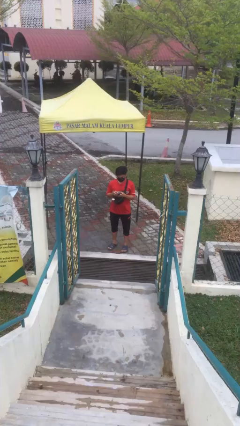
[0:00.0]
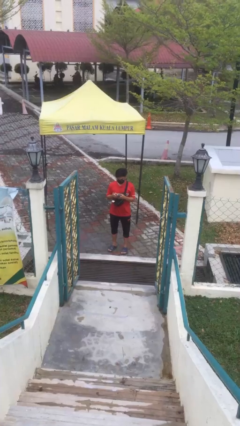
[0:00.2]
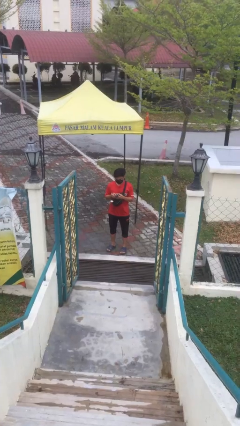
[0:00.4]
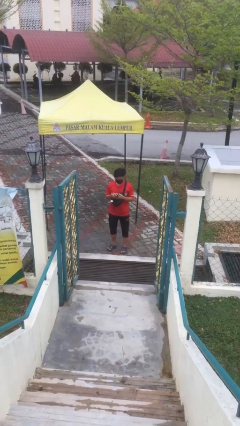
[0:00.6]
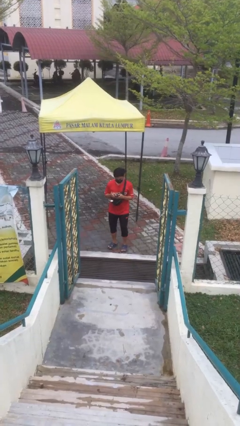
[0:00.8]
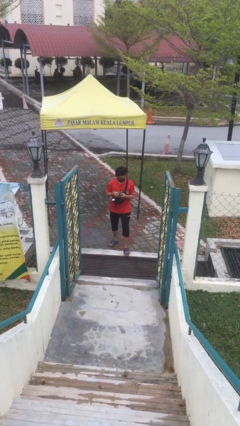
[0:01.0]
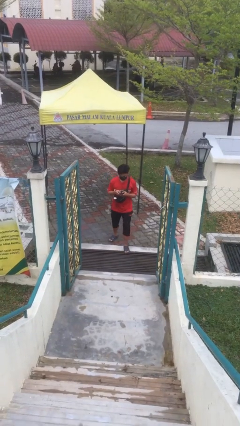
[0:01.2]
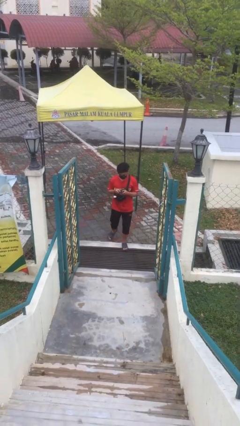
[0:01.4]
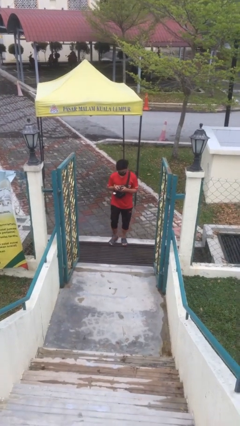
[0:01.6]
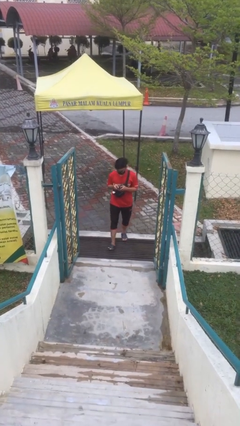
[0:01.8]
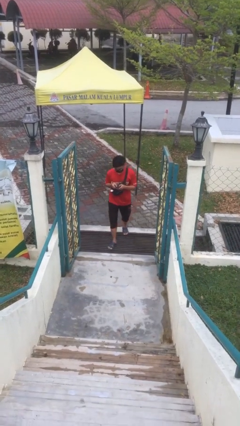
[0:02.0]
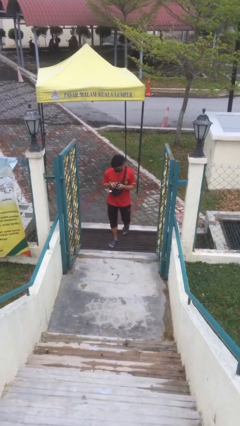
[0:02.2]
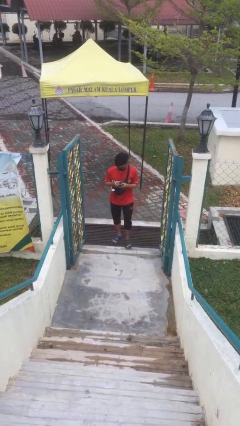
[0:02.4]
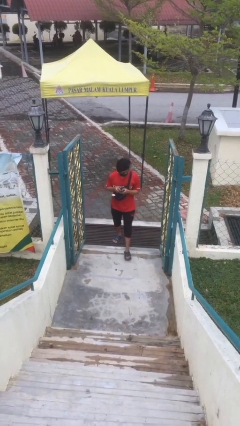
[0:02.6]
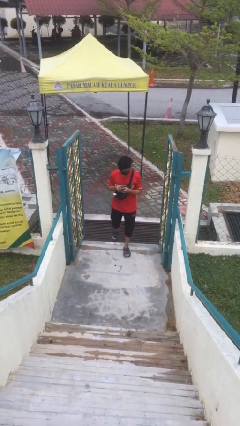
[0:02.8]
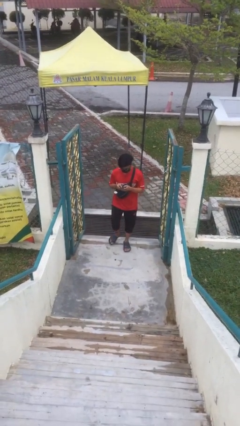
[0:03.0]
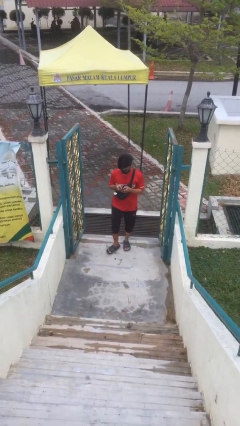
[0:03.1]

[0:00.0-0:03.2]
person enters scene through structure

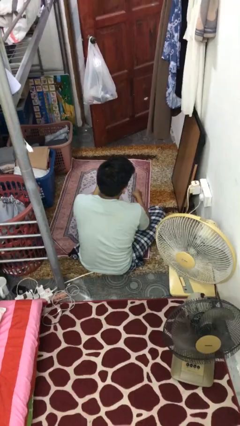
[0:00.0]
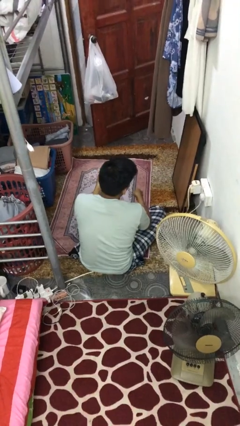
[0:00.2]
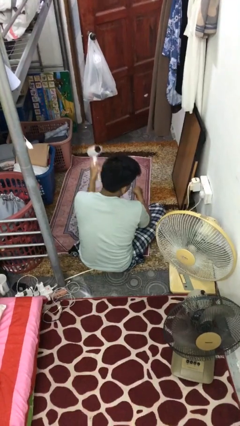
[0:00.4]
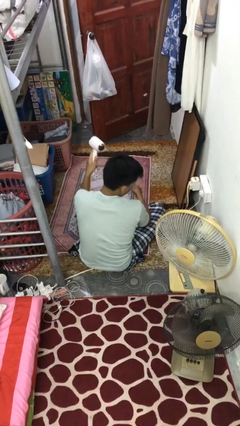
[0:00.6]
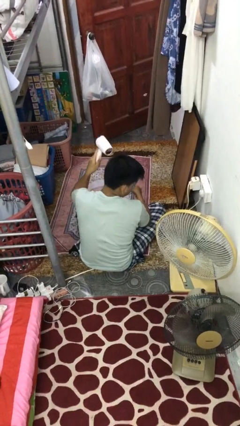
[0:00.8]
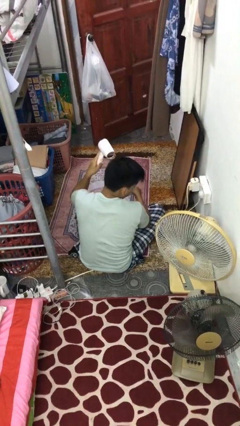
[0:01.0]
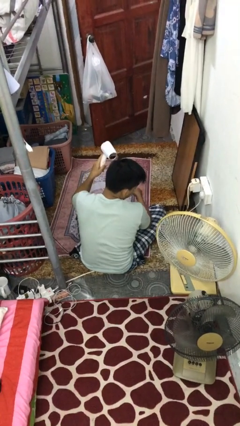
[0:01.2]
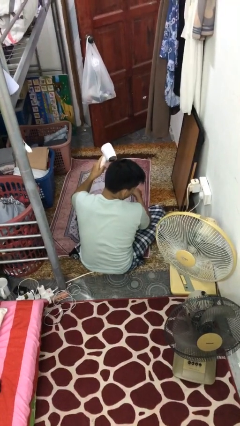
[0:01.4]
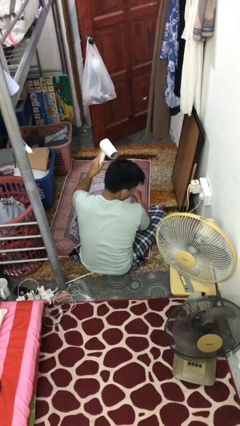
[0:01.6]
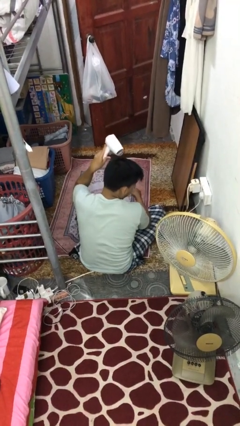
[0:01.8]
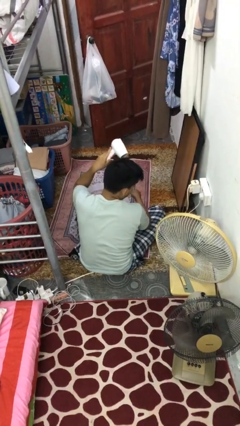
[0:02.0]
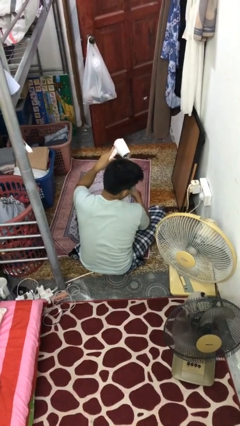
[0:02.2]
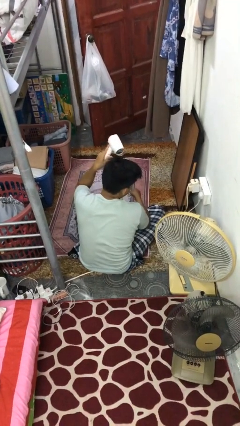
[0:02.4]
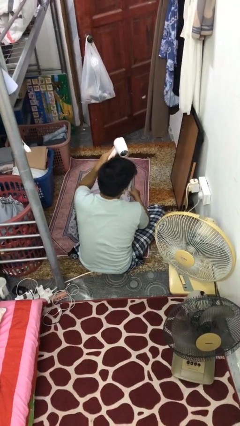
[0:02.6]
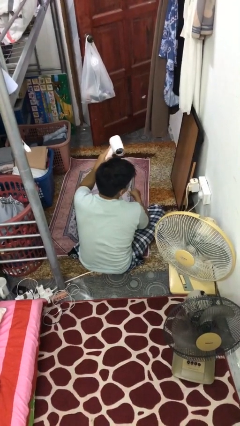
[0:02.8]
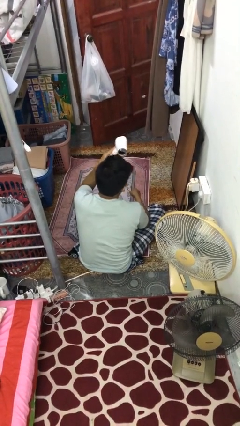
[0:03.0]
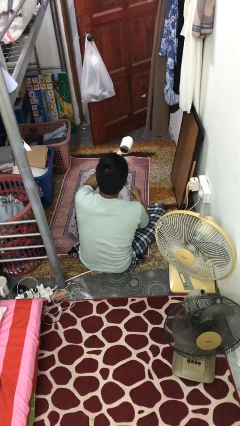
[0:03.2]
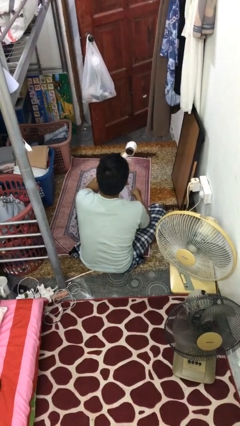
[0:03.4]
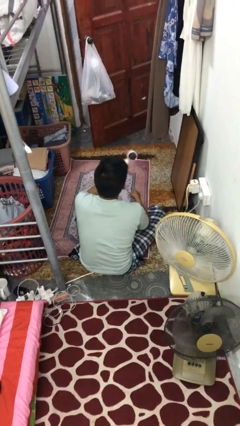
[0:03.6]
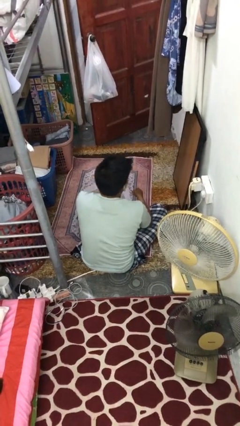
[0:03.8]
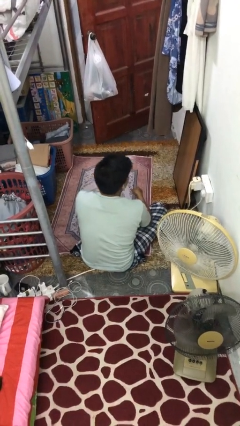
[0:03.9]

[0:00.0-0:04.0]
person dries hair with hairdryer

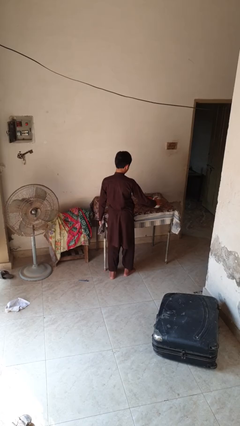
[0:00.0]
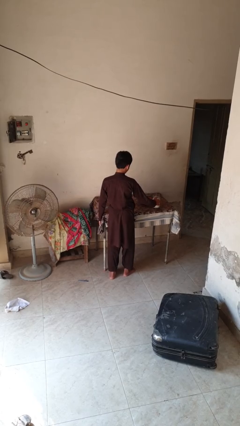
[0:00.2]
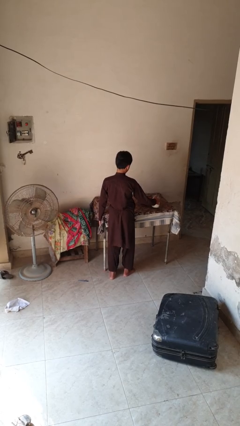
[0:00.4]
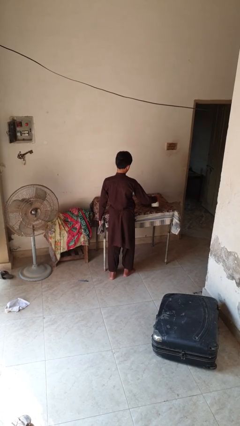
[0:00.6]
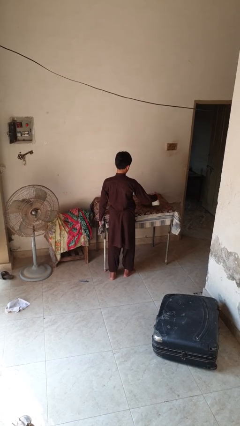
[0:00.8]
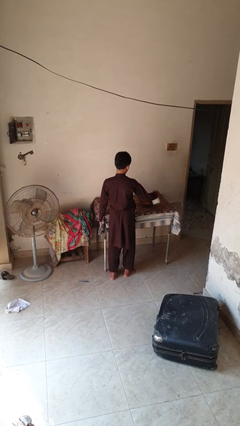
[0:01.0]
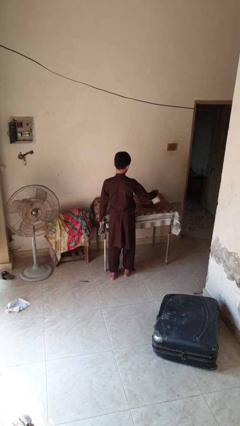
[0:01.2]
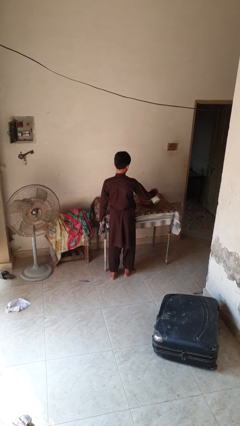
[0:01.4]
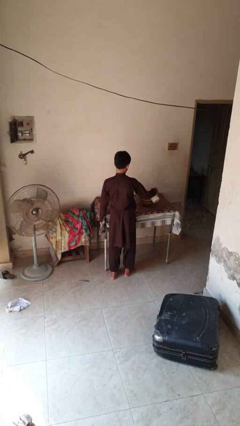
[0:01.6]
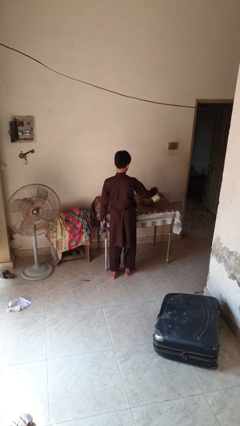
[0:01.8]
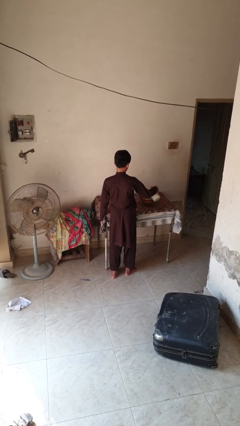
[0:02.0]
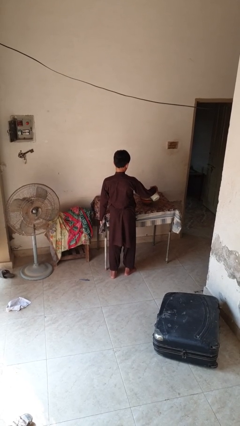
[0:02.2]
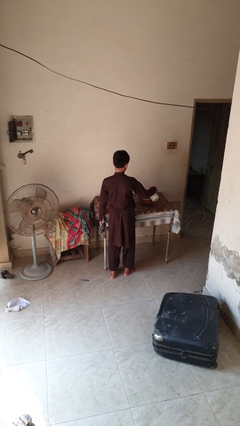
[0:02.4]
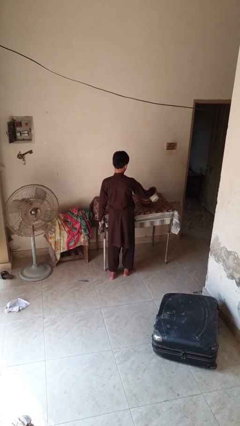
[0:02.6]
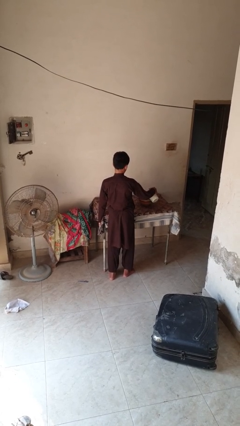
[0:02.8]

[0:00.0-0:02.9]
person pours into bowl

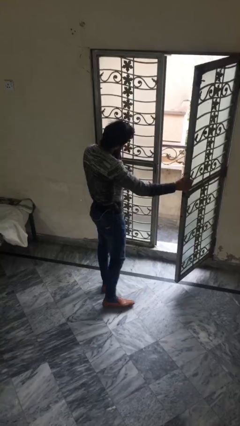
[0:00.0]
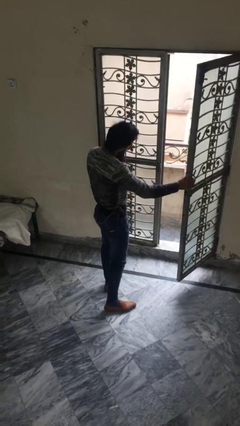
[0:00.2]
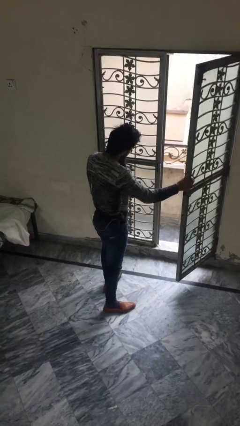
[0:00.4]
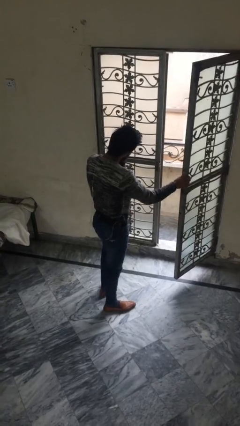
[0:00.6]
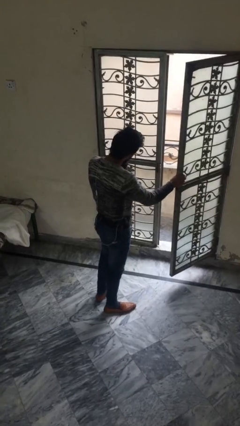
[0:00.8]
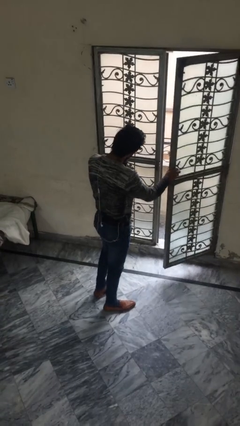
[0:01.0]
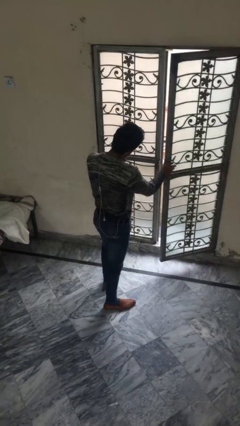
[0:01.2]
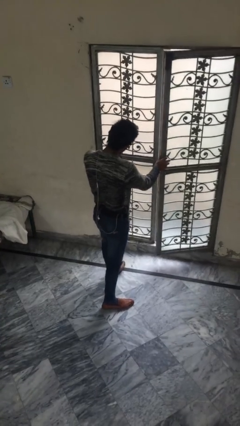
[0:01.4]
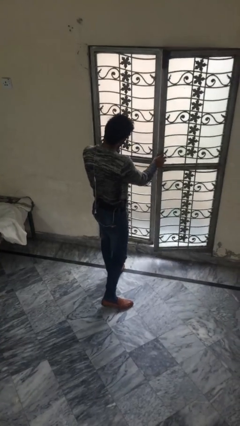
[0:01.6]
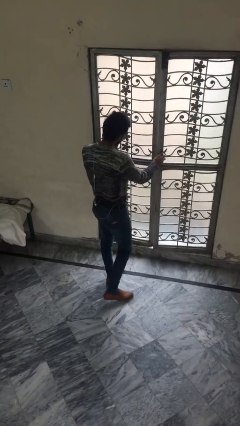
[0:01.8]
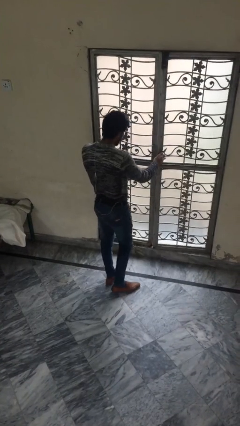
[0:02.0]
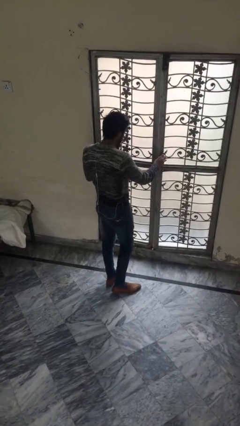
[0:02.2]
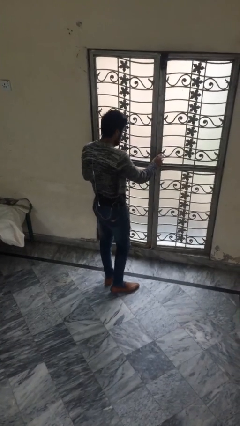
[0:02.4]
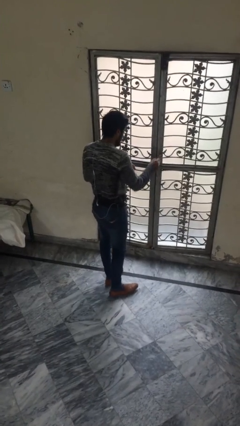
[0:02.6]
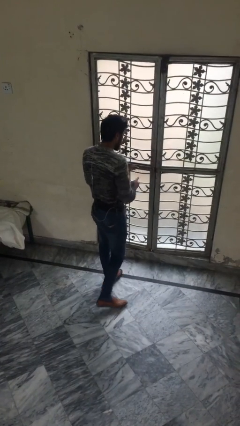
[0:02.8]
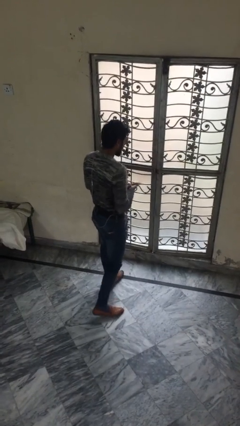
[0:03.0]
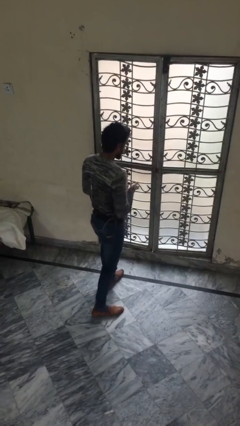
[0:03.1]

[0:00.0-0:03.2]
person closes facility door

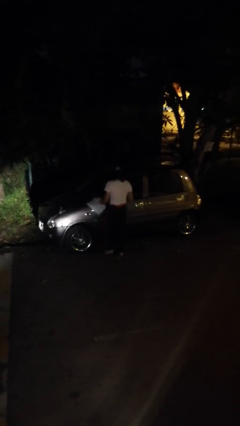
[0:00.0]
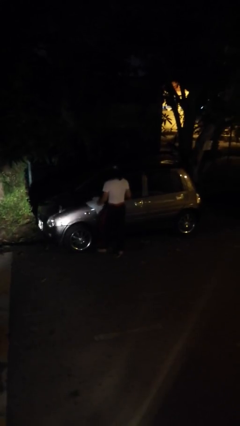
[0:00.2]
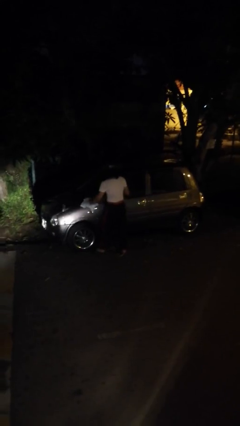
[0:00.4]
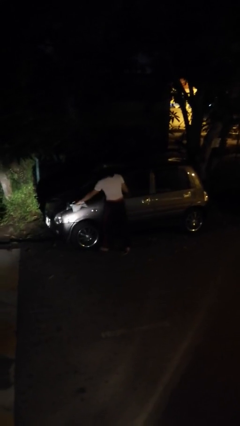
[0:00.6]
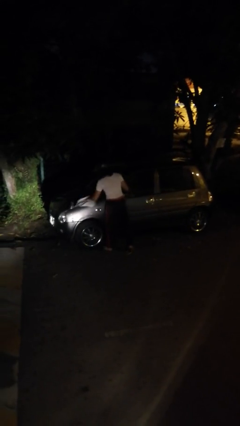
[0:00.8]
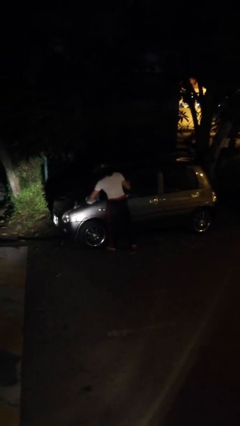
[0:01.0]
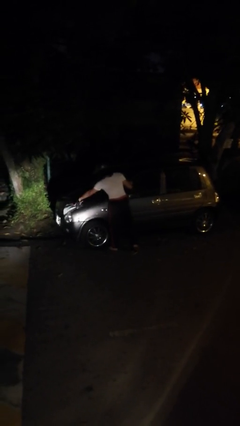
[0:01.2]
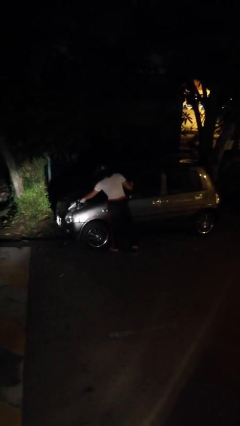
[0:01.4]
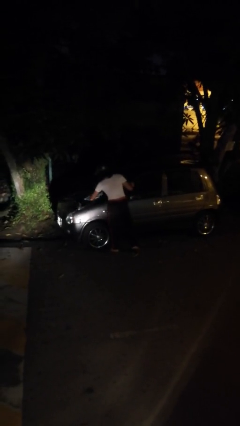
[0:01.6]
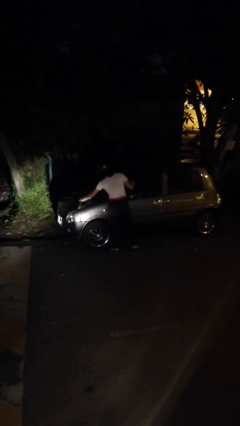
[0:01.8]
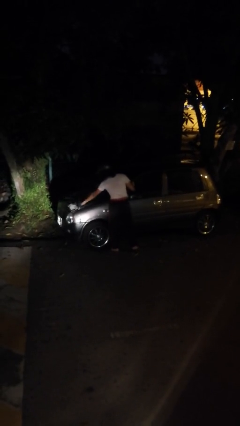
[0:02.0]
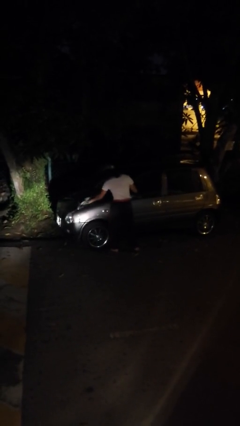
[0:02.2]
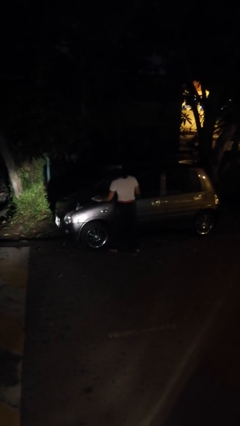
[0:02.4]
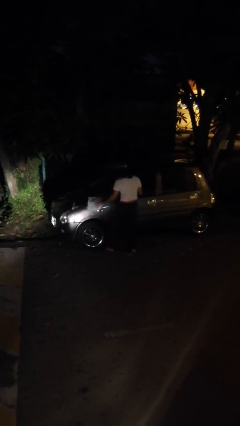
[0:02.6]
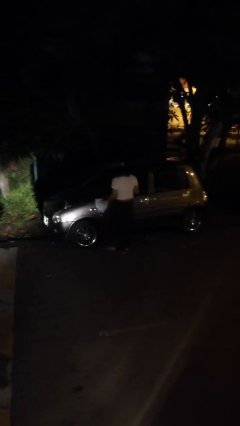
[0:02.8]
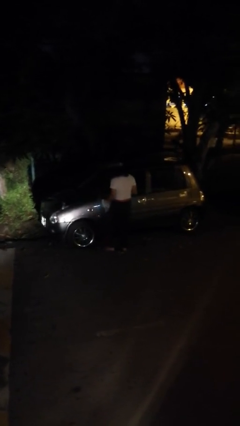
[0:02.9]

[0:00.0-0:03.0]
person polishes car with rag

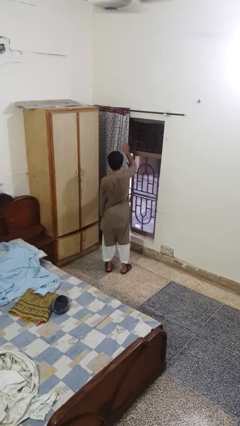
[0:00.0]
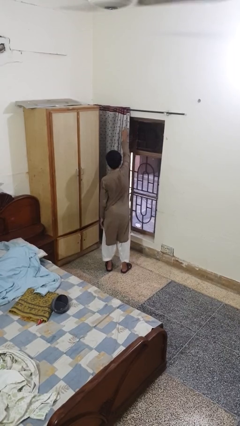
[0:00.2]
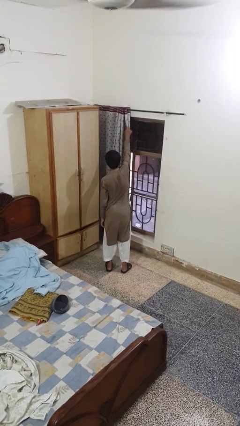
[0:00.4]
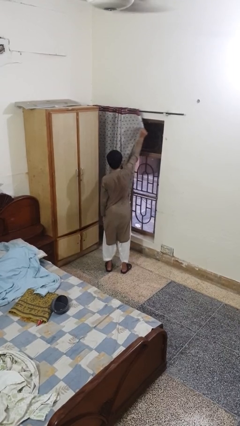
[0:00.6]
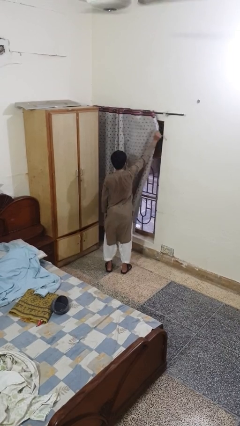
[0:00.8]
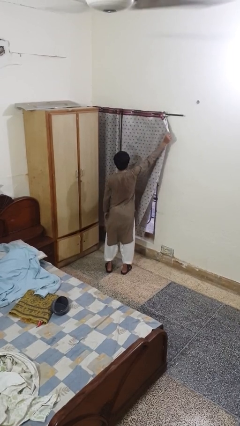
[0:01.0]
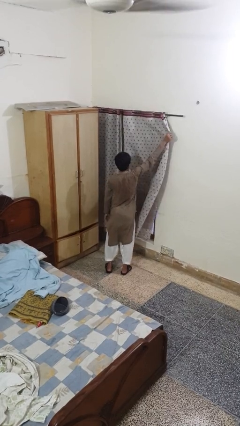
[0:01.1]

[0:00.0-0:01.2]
person closes curtains

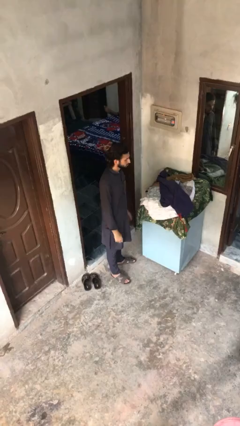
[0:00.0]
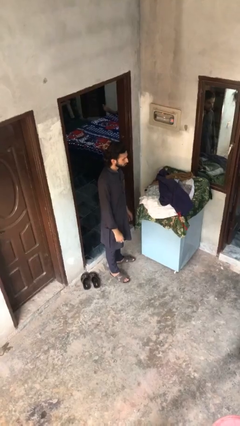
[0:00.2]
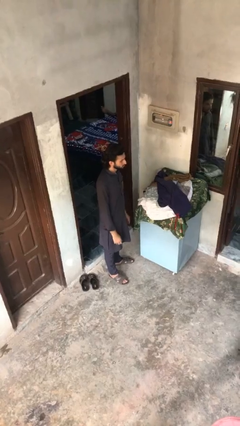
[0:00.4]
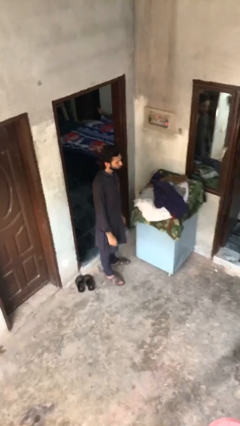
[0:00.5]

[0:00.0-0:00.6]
person folds pants
